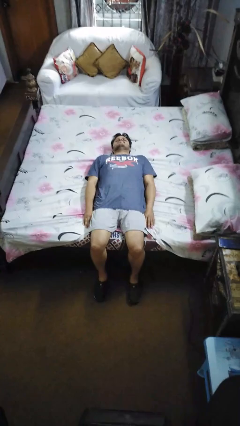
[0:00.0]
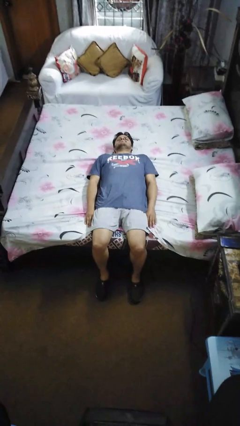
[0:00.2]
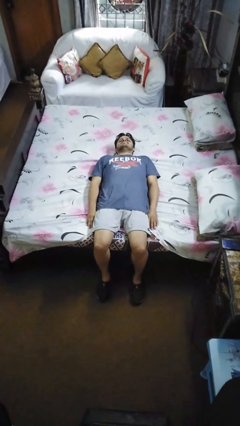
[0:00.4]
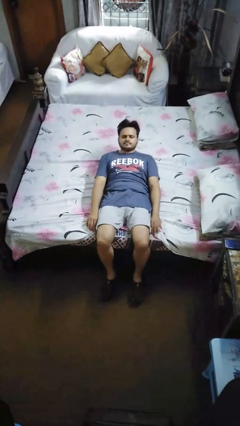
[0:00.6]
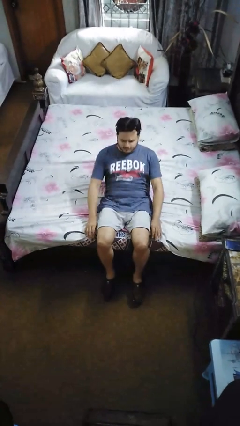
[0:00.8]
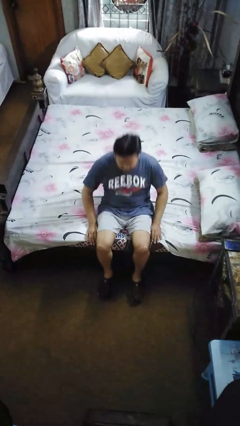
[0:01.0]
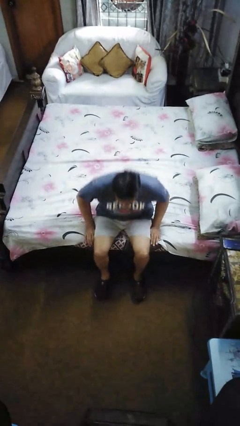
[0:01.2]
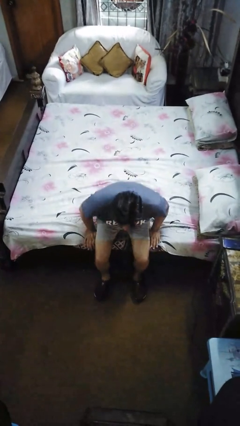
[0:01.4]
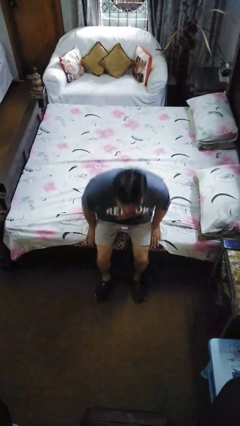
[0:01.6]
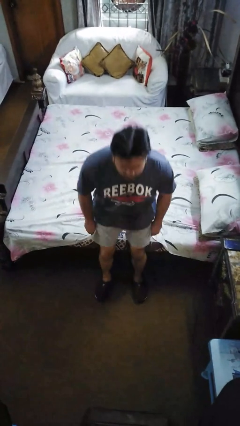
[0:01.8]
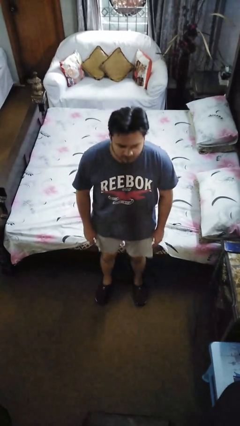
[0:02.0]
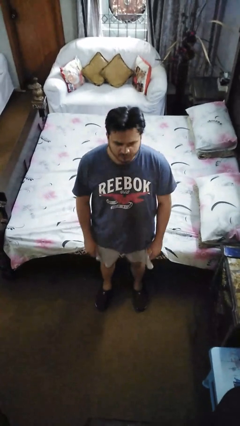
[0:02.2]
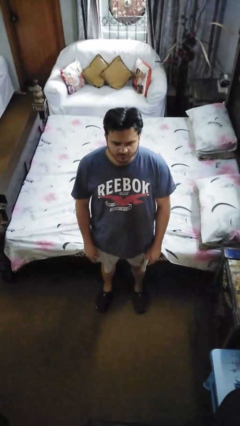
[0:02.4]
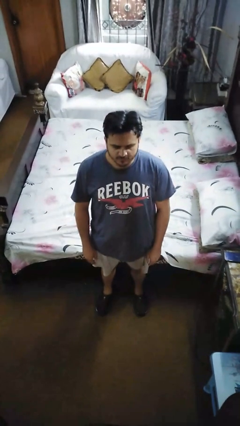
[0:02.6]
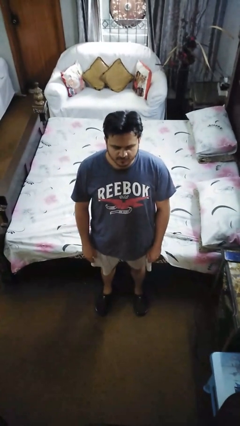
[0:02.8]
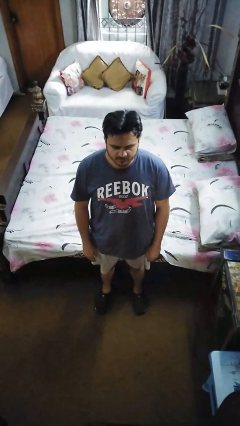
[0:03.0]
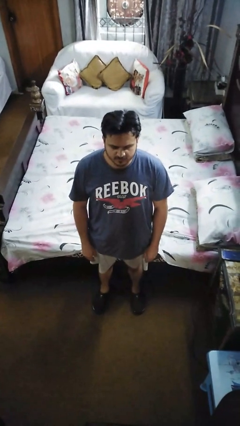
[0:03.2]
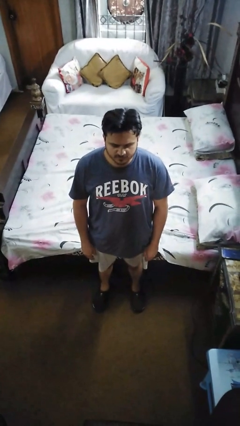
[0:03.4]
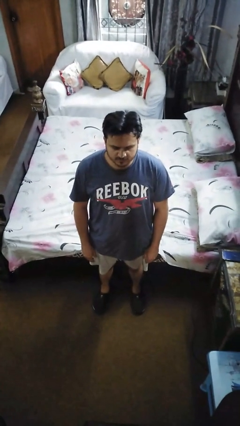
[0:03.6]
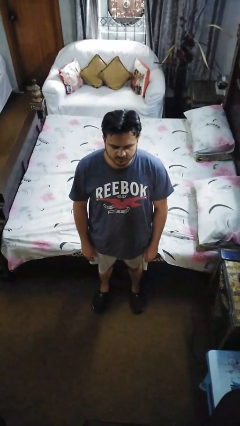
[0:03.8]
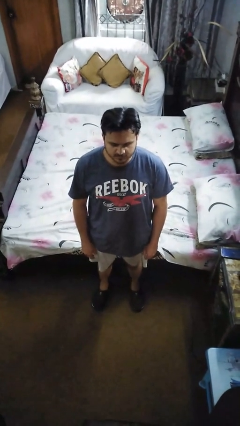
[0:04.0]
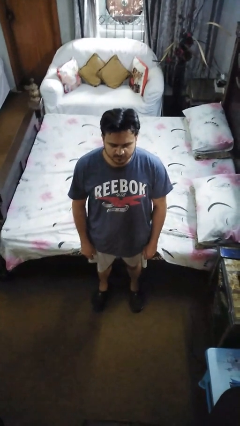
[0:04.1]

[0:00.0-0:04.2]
person stands up

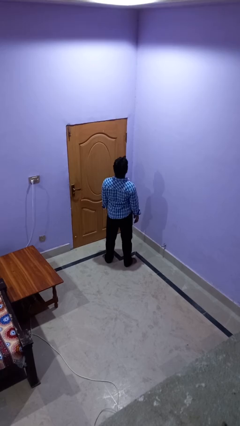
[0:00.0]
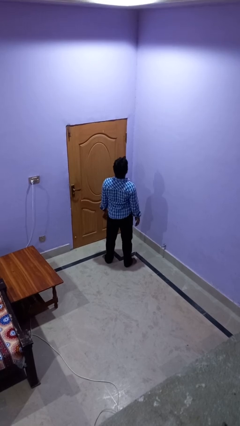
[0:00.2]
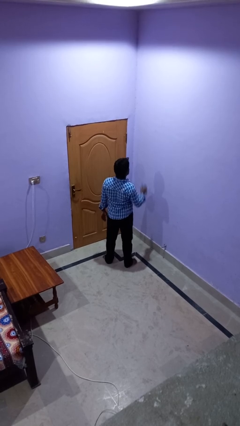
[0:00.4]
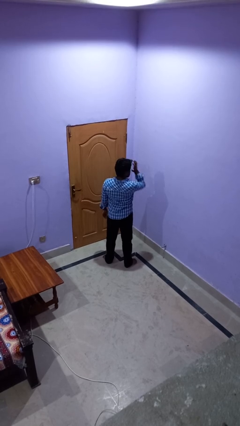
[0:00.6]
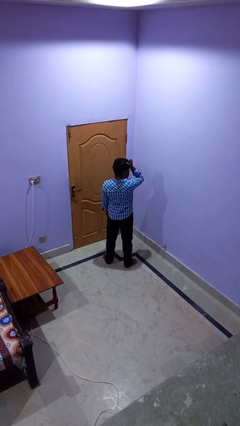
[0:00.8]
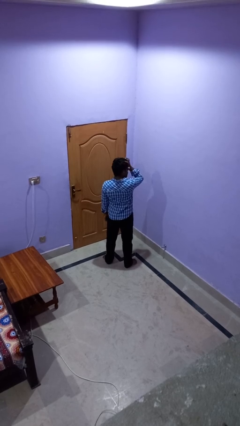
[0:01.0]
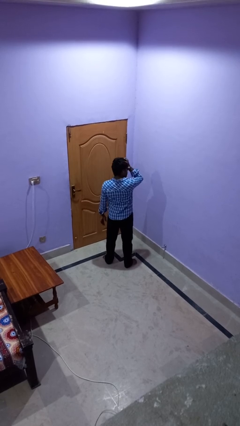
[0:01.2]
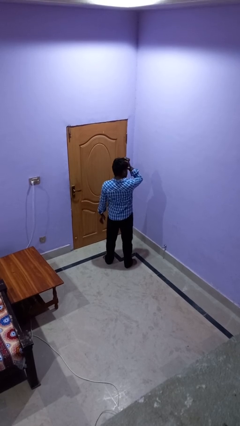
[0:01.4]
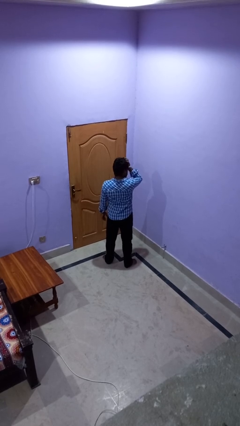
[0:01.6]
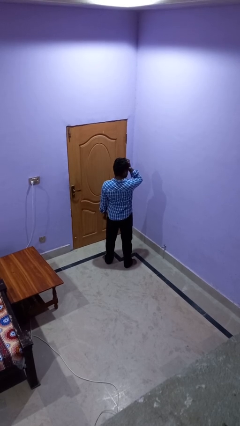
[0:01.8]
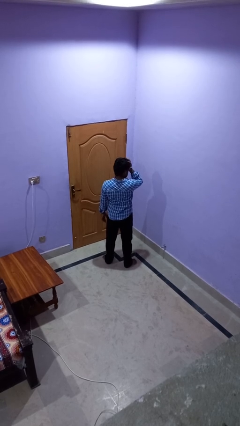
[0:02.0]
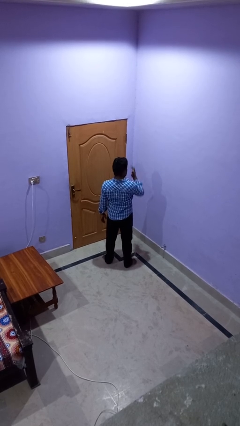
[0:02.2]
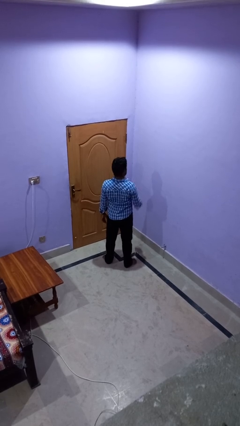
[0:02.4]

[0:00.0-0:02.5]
person rubs eyes

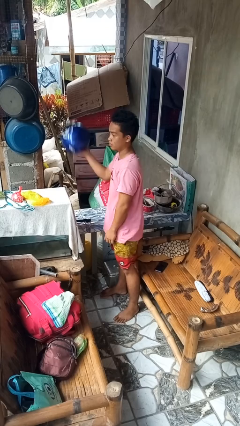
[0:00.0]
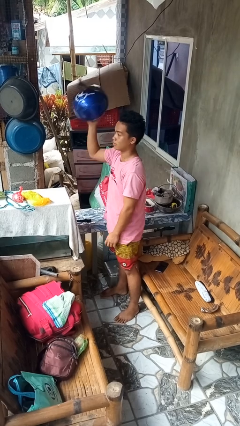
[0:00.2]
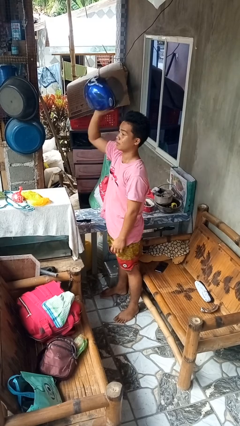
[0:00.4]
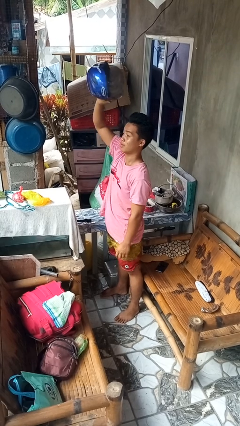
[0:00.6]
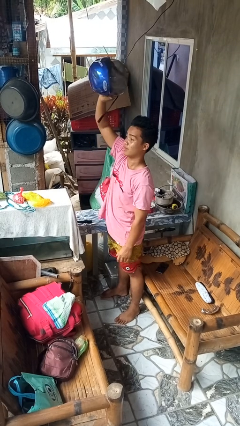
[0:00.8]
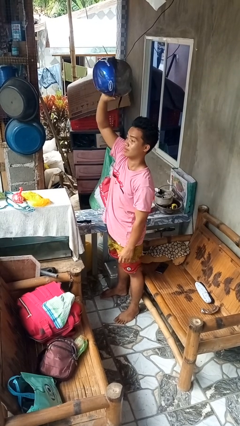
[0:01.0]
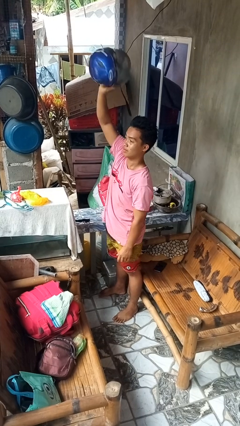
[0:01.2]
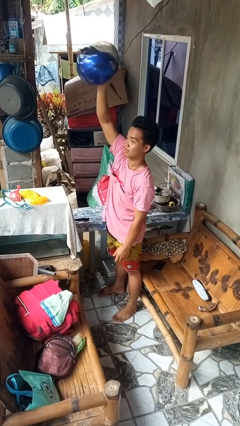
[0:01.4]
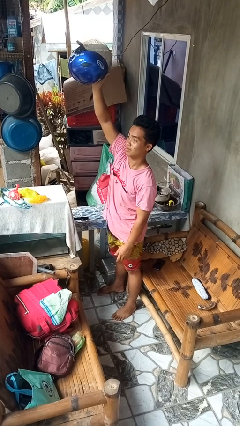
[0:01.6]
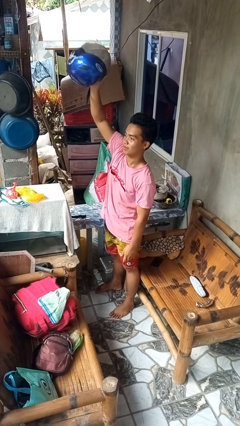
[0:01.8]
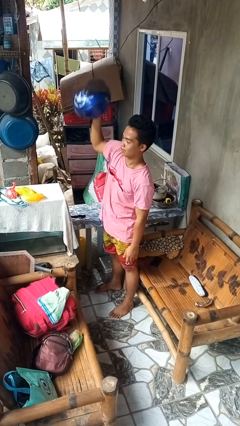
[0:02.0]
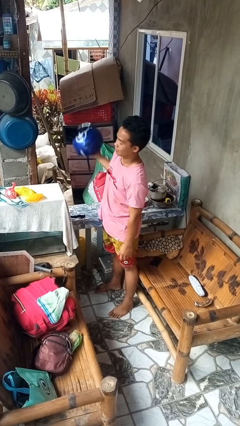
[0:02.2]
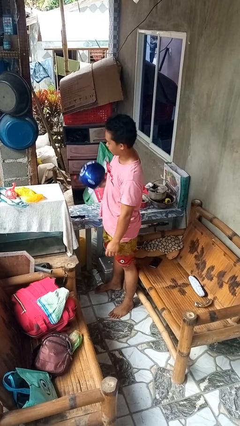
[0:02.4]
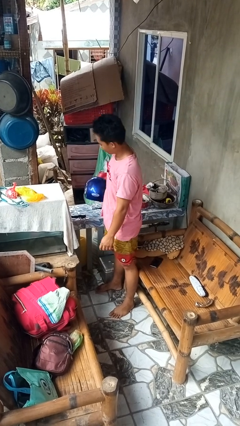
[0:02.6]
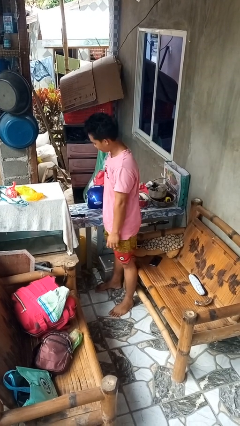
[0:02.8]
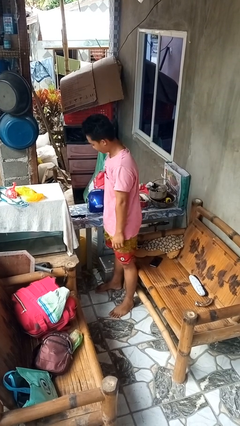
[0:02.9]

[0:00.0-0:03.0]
person holds object above head

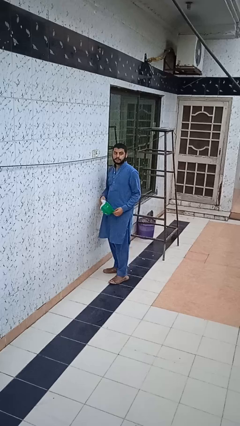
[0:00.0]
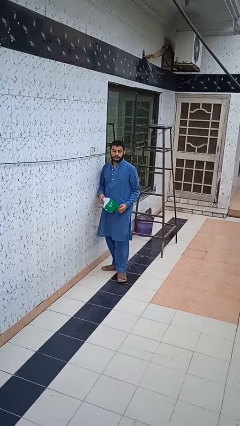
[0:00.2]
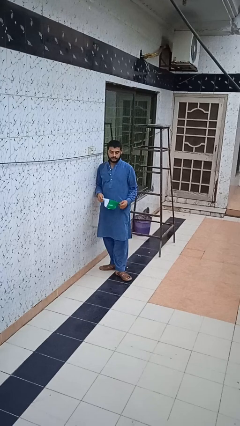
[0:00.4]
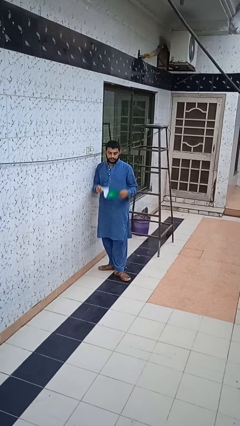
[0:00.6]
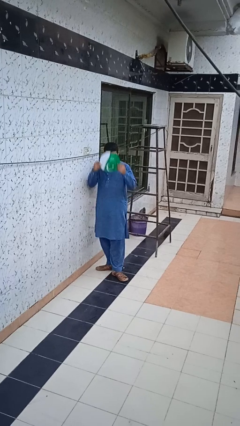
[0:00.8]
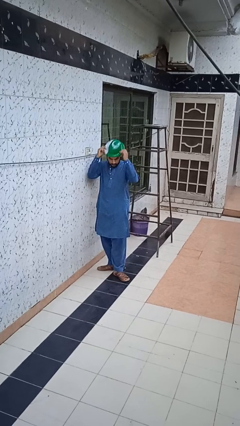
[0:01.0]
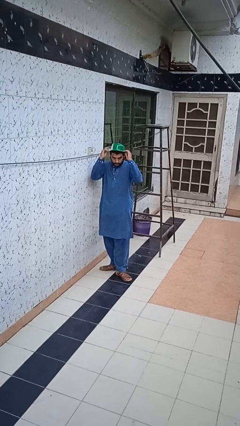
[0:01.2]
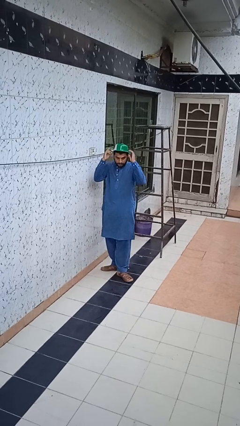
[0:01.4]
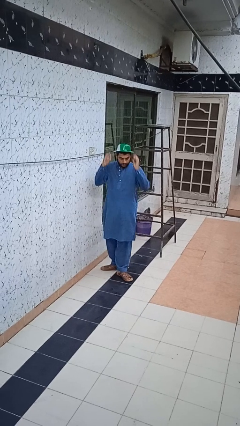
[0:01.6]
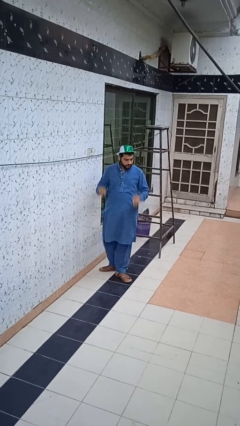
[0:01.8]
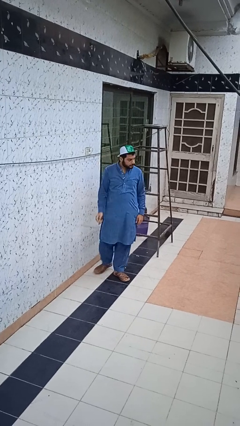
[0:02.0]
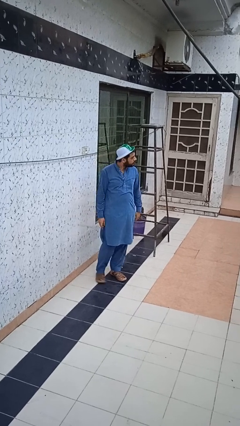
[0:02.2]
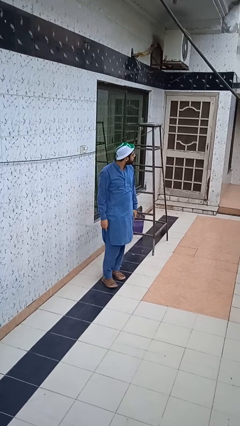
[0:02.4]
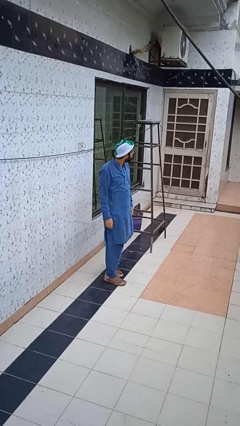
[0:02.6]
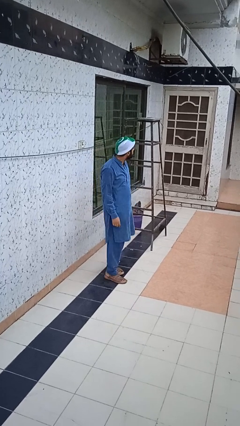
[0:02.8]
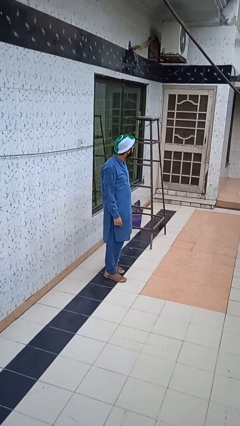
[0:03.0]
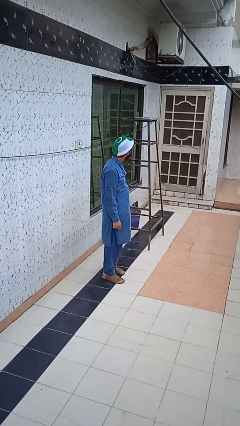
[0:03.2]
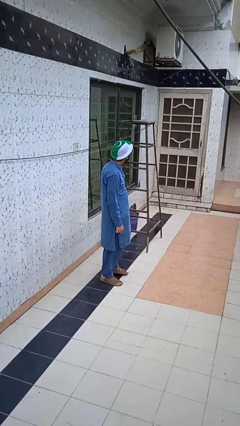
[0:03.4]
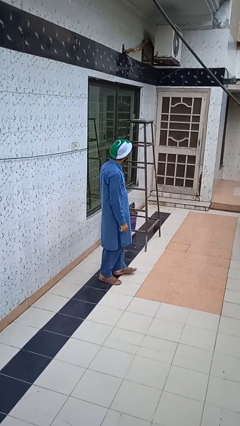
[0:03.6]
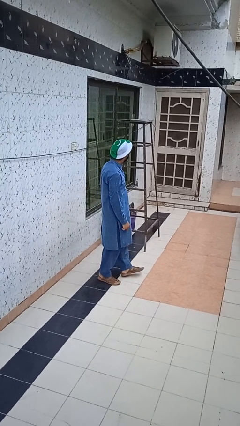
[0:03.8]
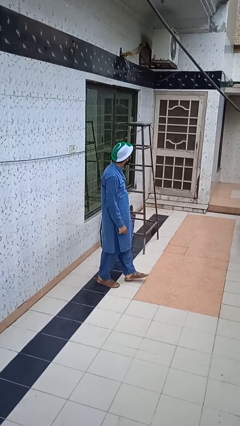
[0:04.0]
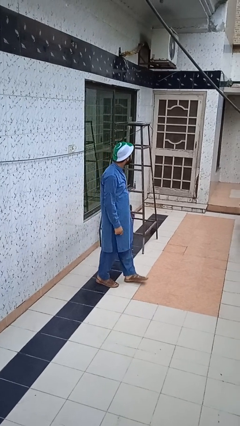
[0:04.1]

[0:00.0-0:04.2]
person puts on hat

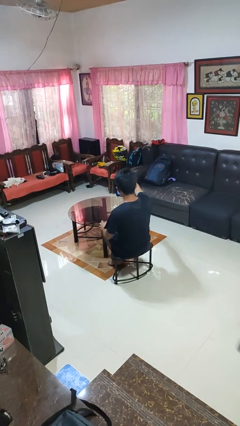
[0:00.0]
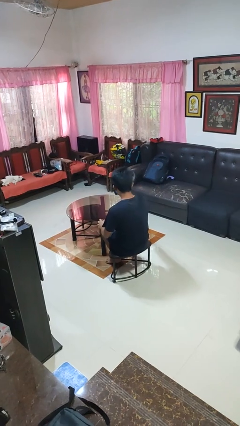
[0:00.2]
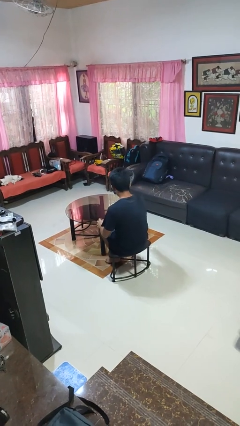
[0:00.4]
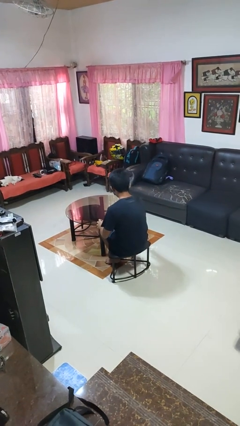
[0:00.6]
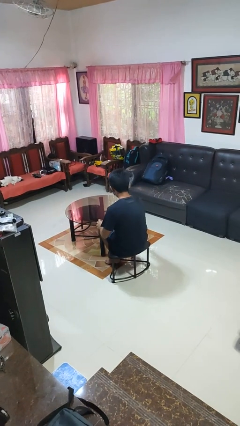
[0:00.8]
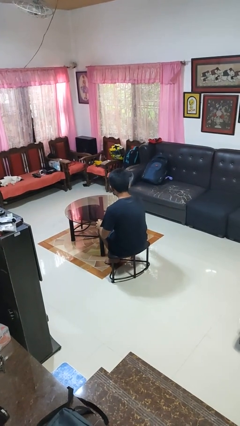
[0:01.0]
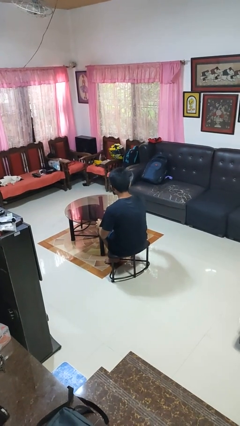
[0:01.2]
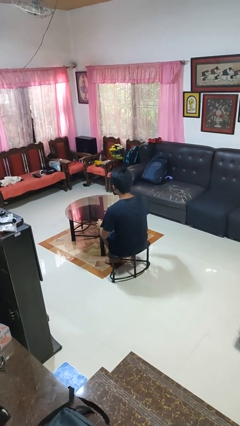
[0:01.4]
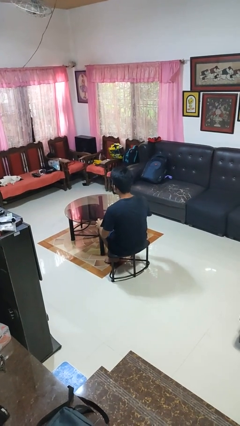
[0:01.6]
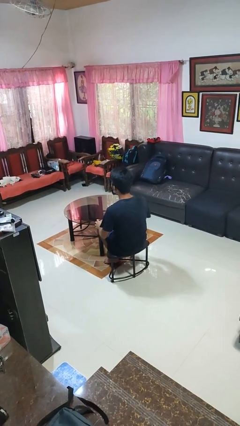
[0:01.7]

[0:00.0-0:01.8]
person puts down object on table

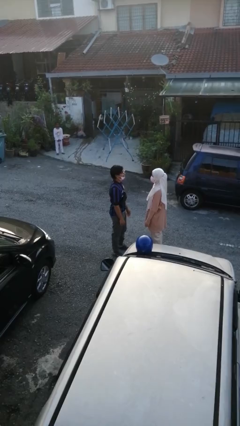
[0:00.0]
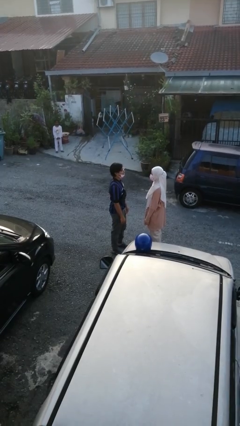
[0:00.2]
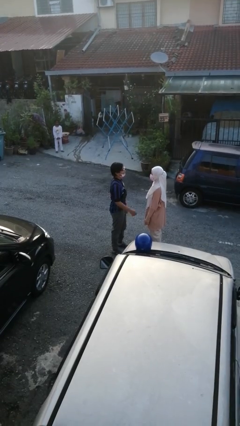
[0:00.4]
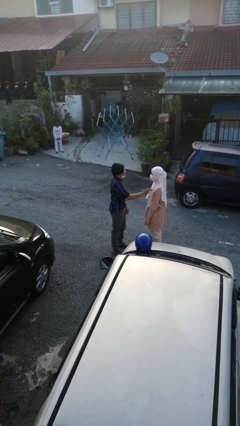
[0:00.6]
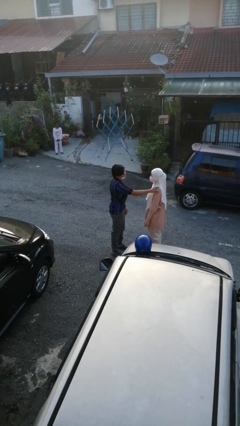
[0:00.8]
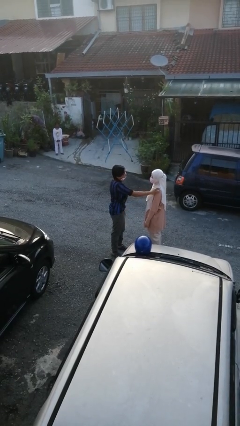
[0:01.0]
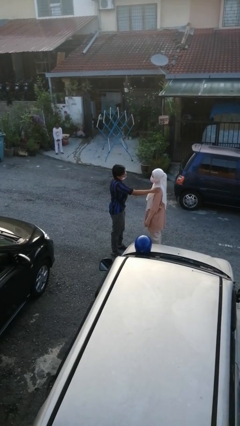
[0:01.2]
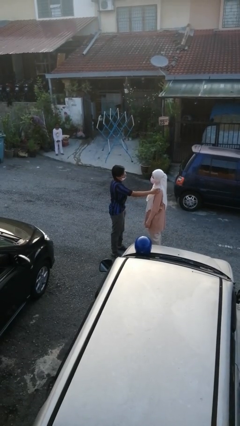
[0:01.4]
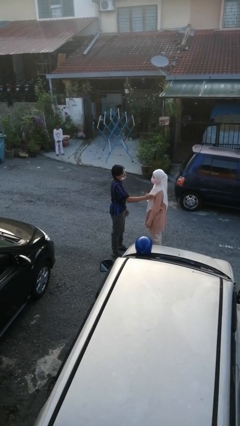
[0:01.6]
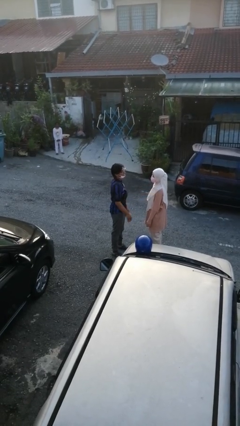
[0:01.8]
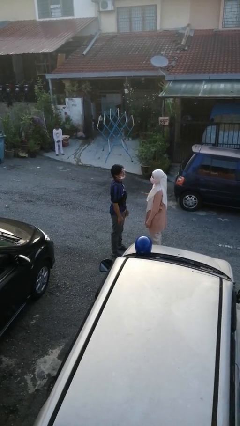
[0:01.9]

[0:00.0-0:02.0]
person pounds shoulders of person
